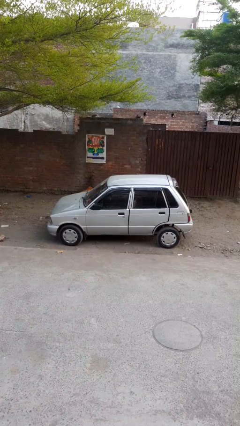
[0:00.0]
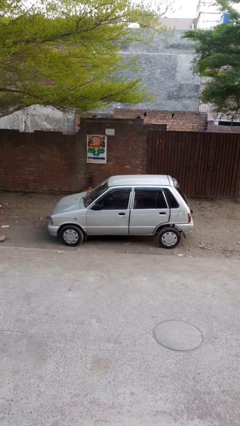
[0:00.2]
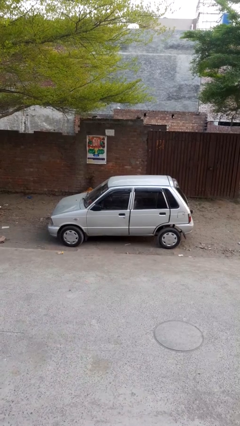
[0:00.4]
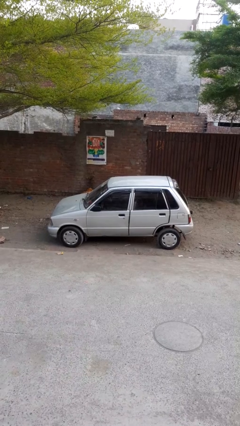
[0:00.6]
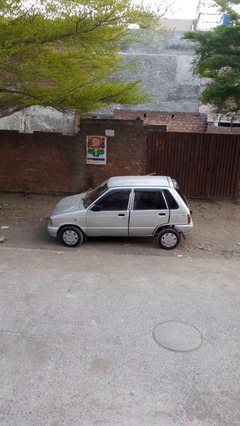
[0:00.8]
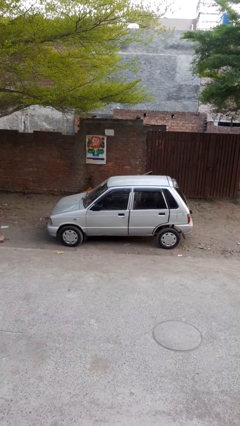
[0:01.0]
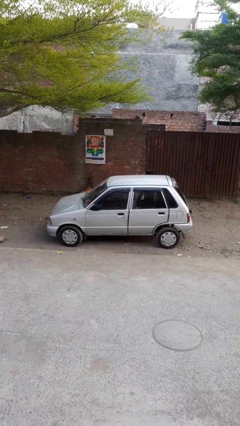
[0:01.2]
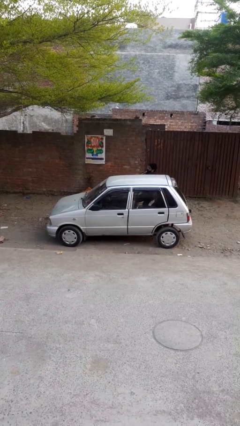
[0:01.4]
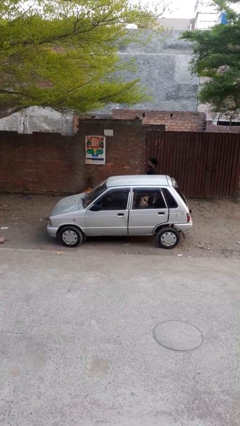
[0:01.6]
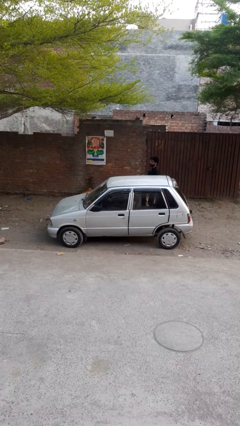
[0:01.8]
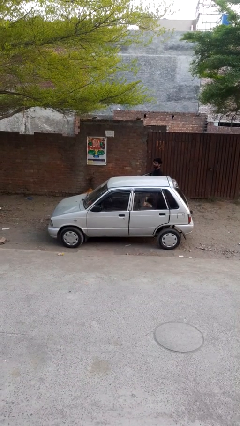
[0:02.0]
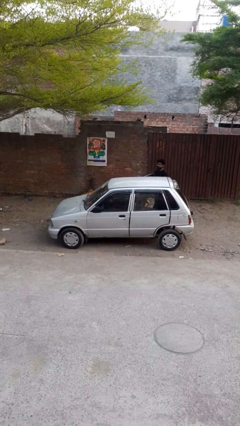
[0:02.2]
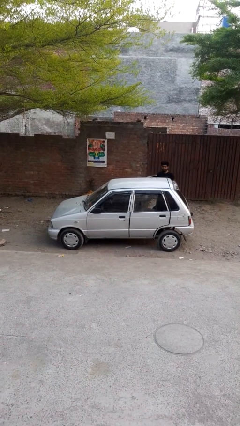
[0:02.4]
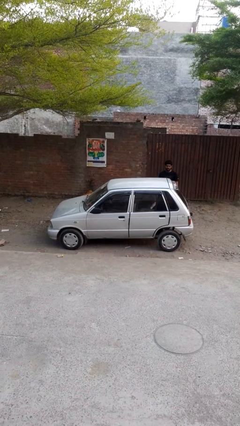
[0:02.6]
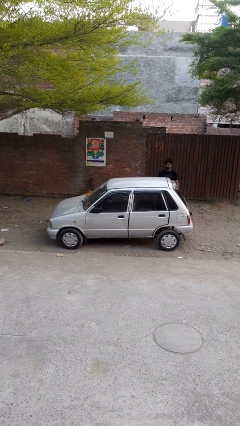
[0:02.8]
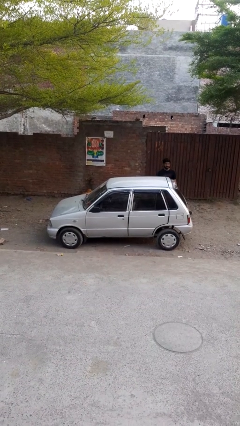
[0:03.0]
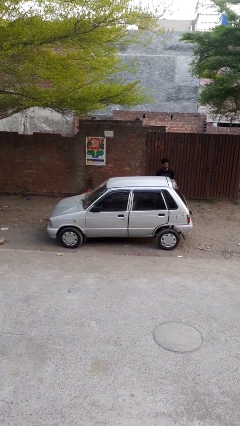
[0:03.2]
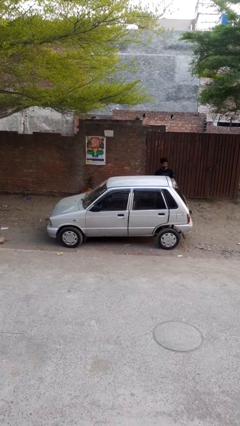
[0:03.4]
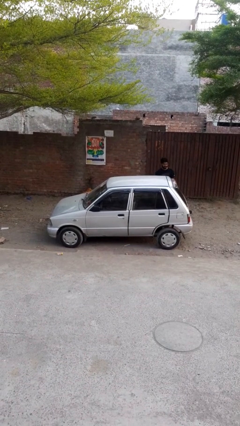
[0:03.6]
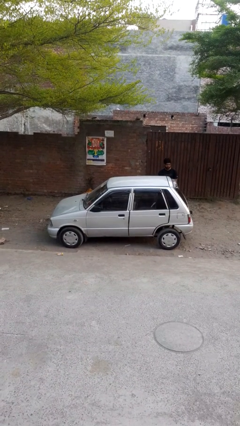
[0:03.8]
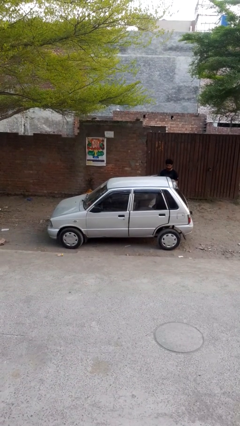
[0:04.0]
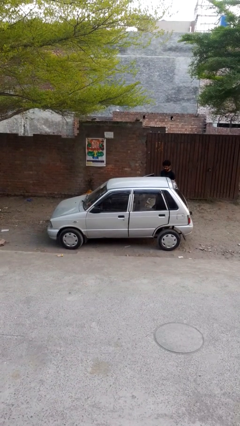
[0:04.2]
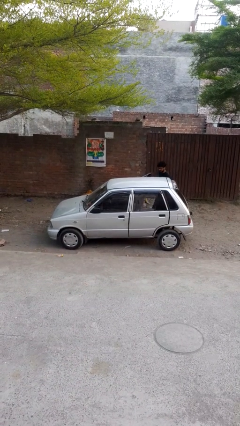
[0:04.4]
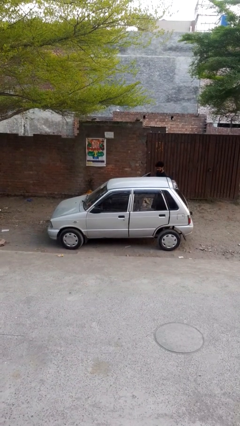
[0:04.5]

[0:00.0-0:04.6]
car drops off person

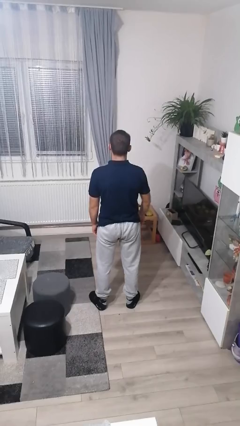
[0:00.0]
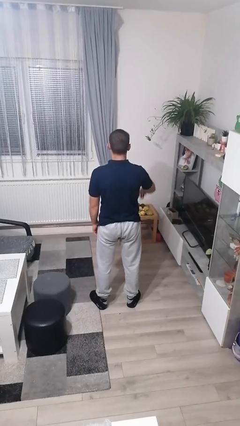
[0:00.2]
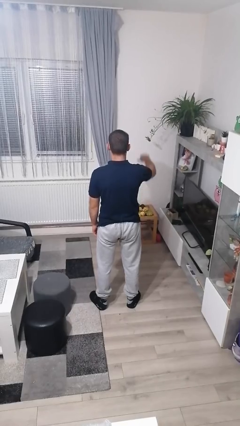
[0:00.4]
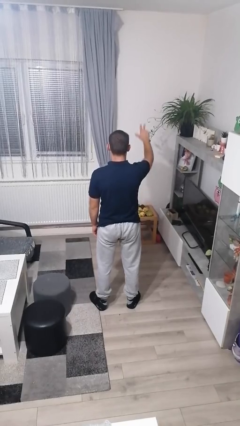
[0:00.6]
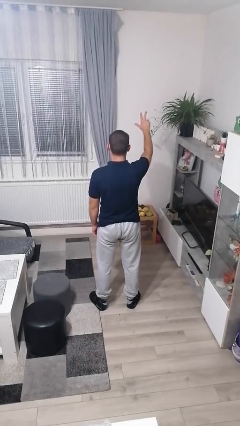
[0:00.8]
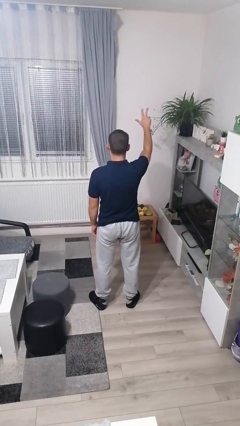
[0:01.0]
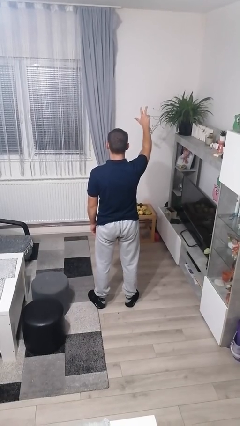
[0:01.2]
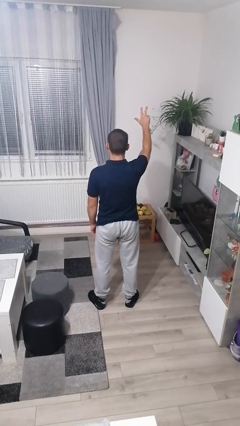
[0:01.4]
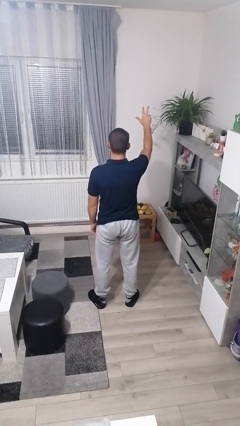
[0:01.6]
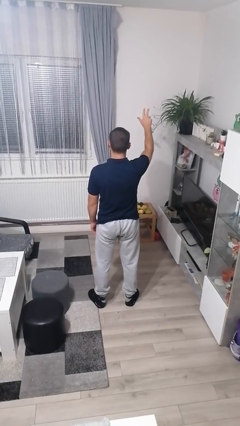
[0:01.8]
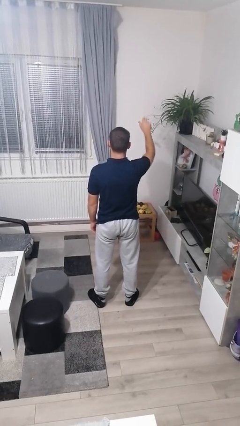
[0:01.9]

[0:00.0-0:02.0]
person gestures number three

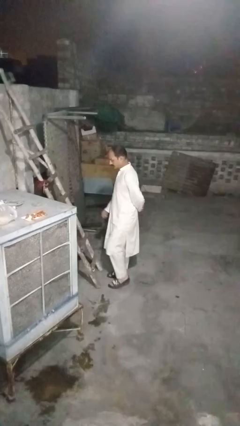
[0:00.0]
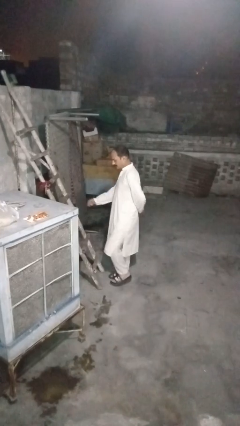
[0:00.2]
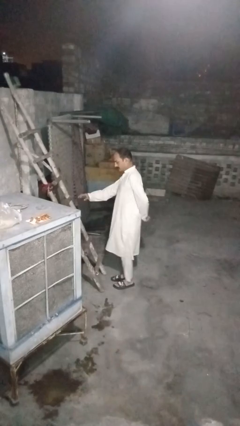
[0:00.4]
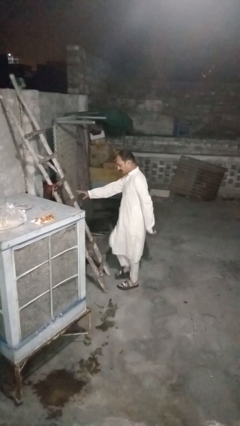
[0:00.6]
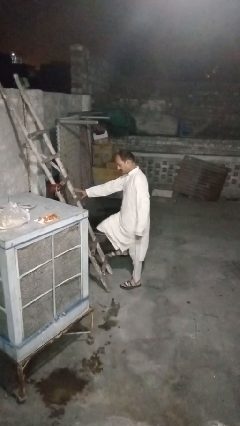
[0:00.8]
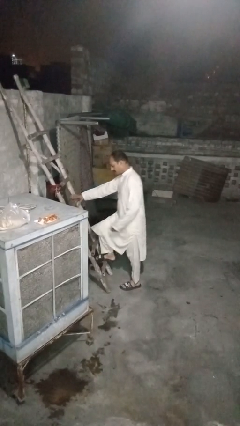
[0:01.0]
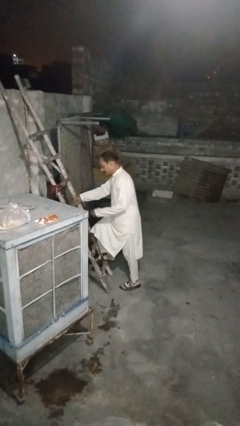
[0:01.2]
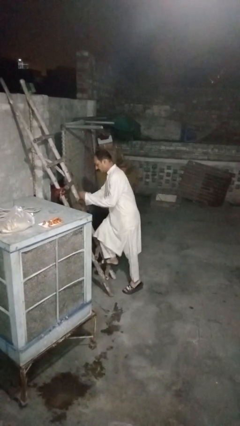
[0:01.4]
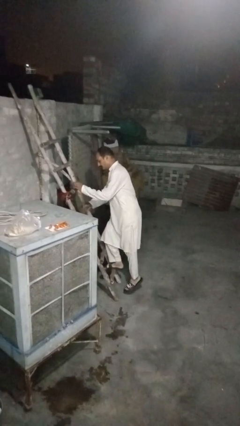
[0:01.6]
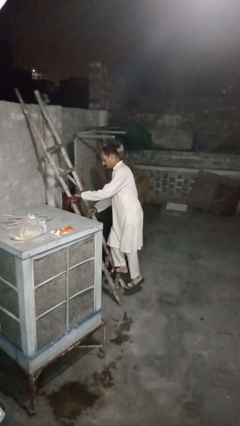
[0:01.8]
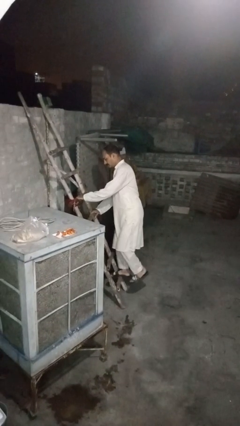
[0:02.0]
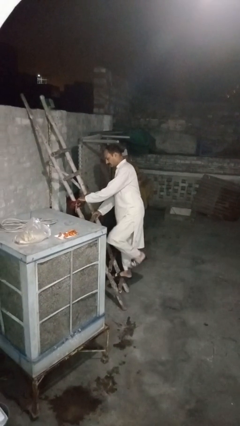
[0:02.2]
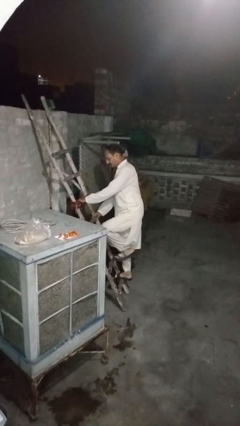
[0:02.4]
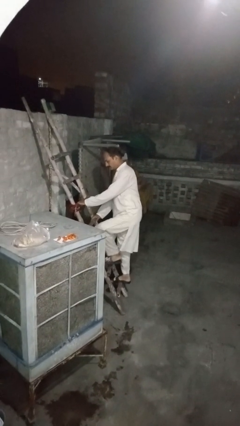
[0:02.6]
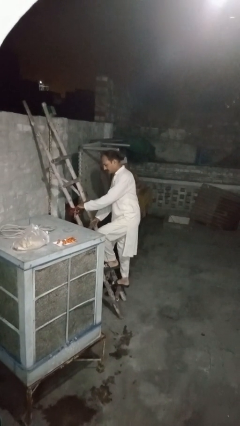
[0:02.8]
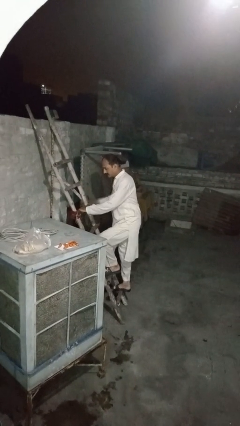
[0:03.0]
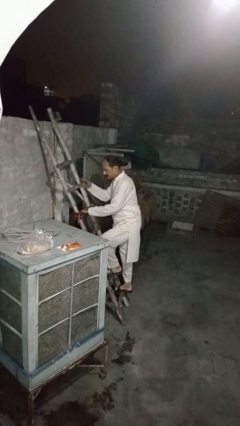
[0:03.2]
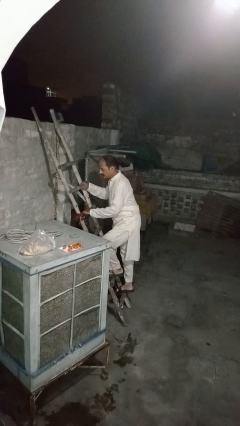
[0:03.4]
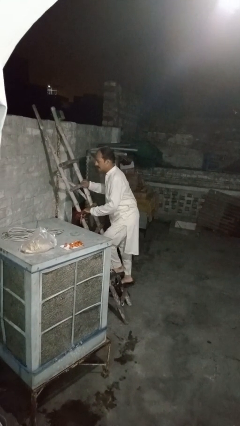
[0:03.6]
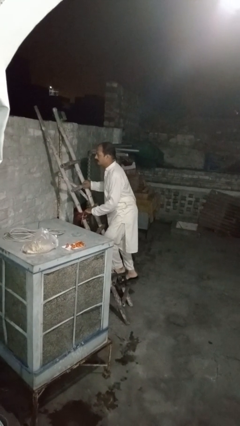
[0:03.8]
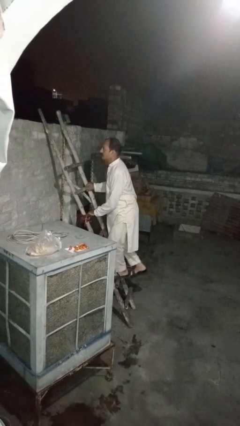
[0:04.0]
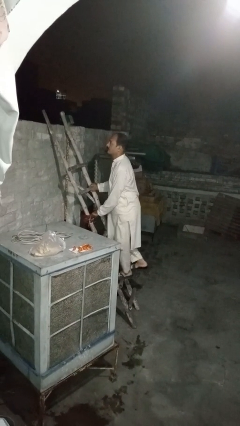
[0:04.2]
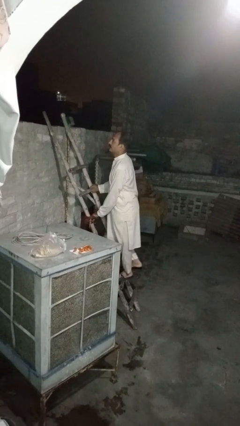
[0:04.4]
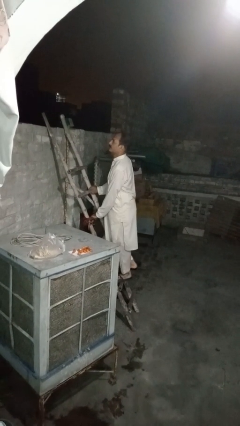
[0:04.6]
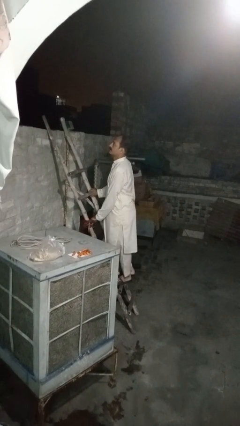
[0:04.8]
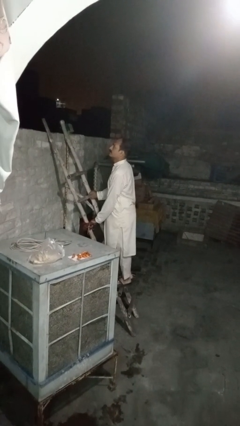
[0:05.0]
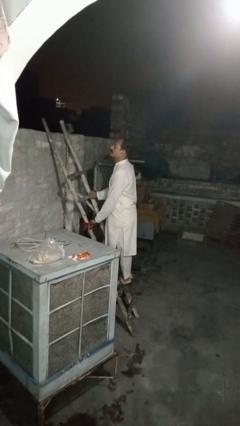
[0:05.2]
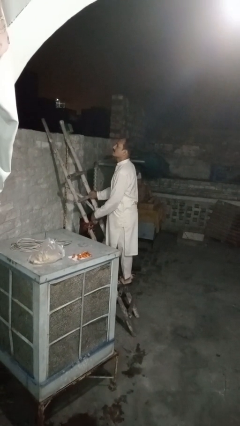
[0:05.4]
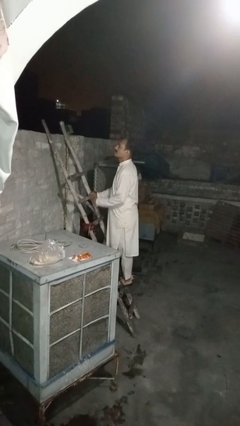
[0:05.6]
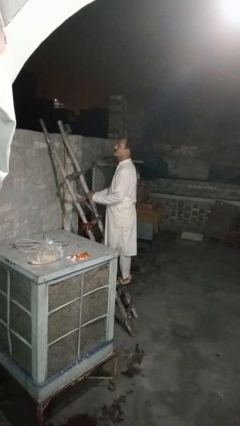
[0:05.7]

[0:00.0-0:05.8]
person climbs up ladder

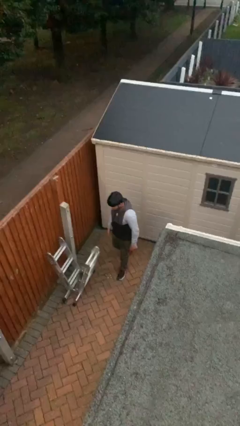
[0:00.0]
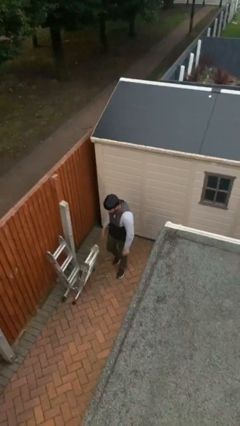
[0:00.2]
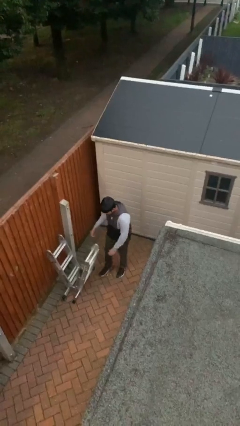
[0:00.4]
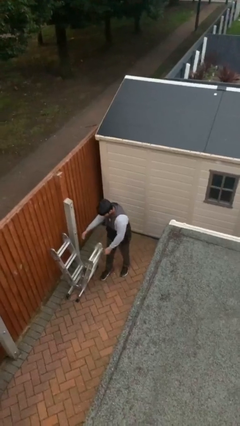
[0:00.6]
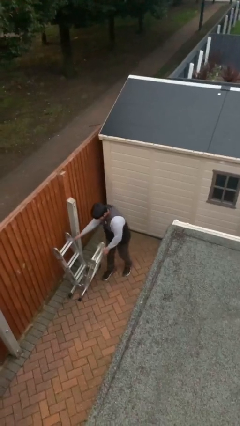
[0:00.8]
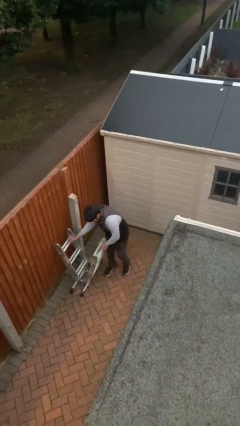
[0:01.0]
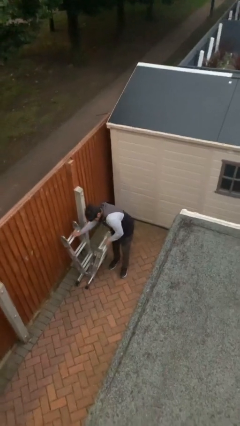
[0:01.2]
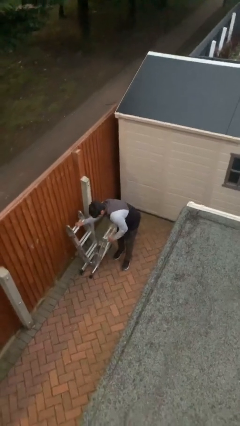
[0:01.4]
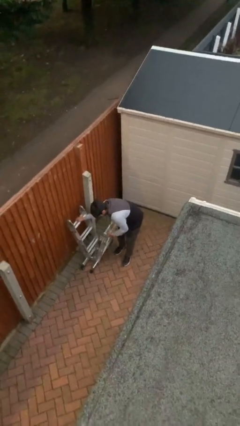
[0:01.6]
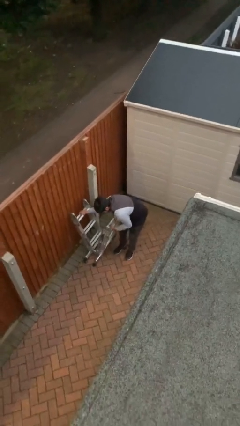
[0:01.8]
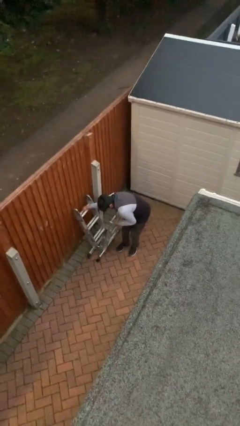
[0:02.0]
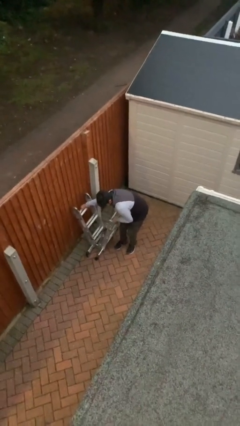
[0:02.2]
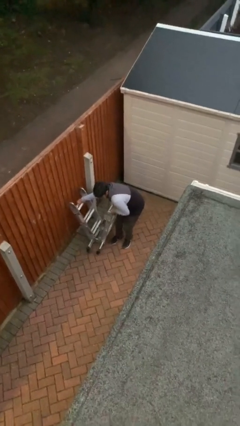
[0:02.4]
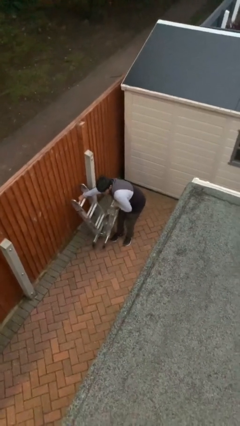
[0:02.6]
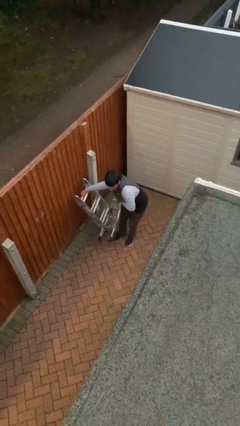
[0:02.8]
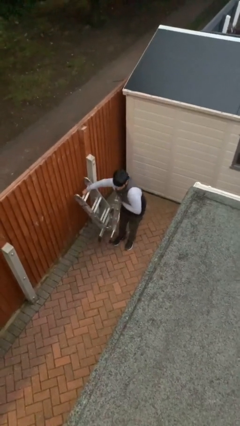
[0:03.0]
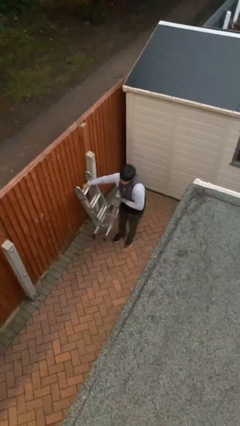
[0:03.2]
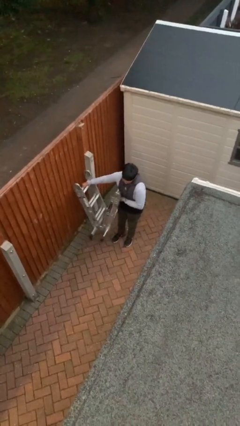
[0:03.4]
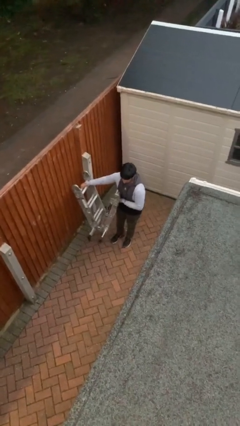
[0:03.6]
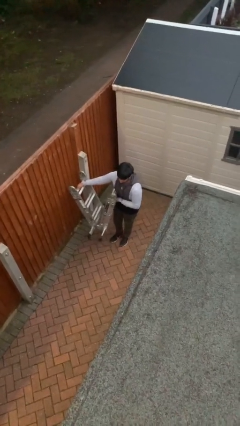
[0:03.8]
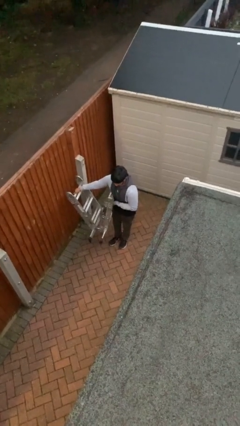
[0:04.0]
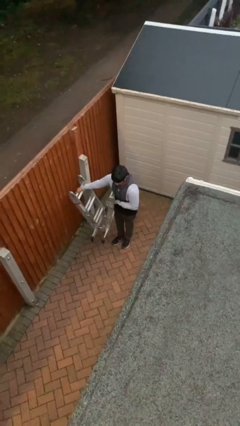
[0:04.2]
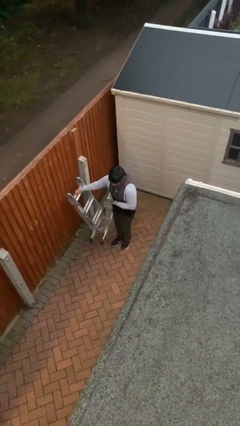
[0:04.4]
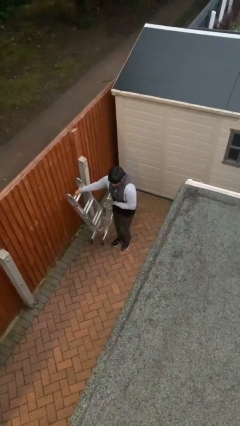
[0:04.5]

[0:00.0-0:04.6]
person picks up object from floor

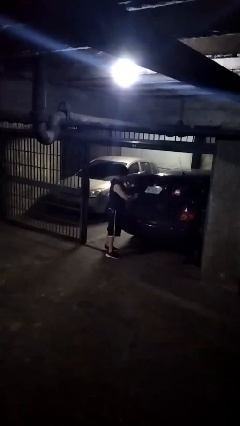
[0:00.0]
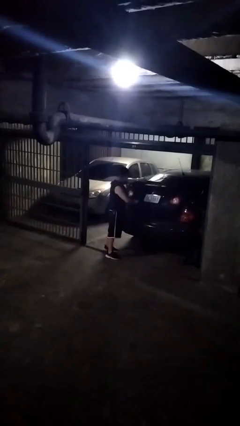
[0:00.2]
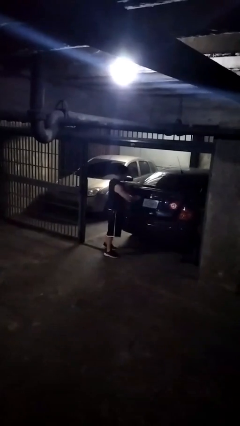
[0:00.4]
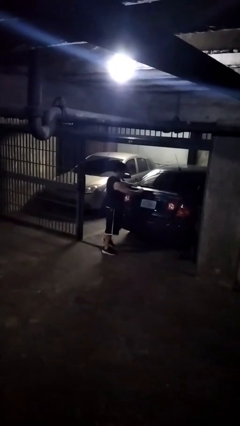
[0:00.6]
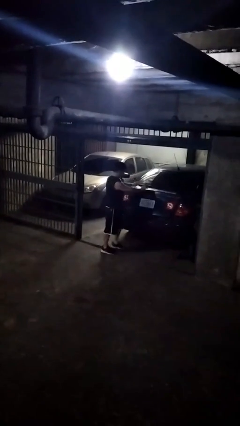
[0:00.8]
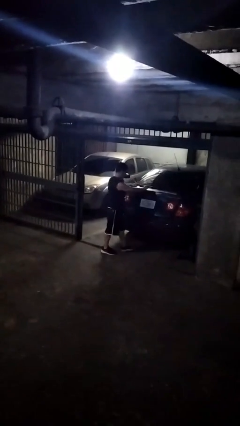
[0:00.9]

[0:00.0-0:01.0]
person closes car trunk
